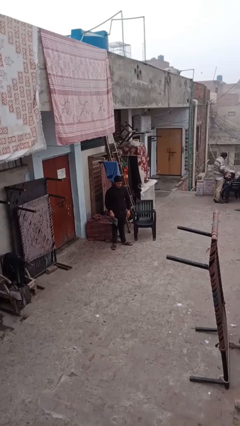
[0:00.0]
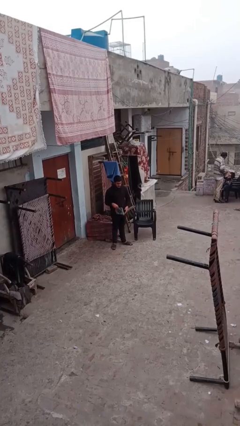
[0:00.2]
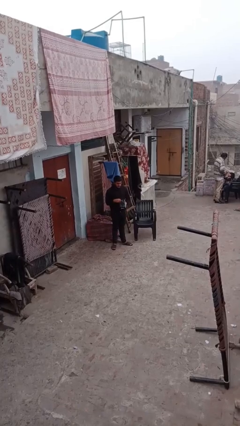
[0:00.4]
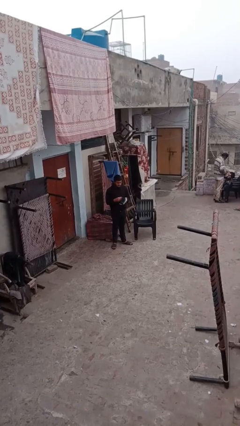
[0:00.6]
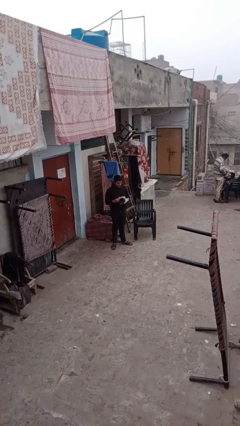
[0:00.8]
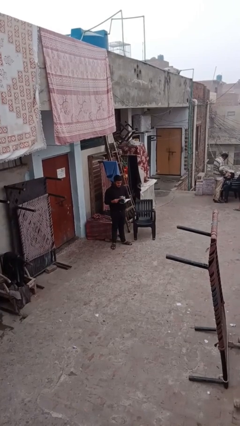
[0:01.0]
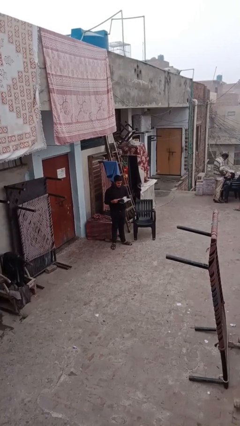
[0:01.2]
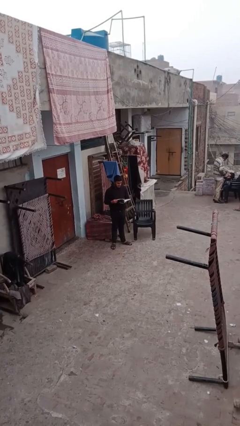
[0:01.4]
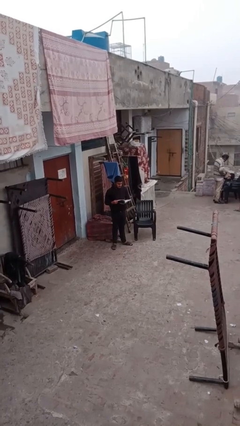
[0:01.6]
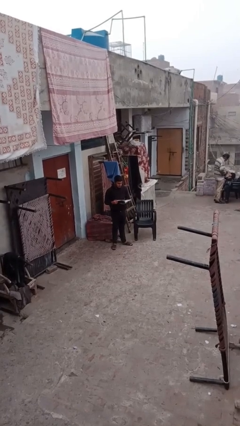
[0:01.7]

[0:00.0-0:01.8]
person reads document

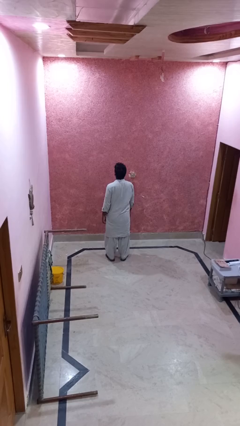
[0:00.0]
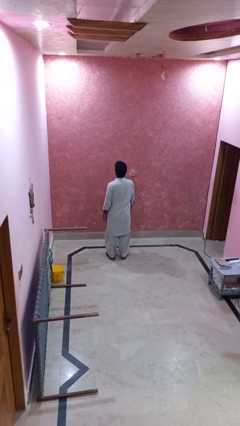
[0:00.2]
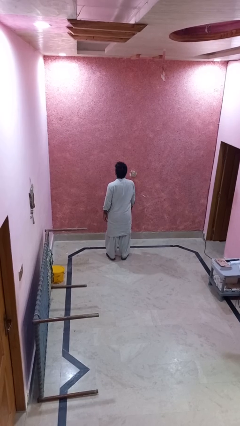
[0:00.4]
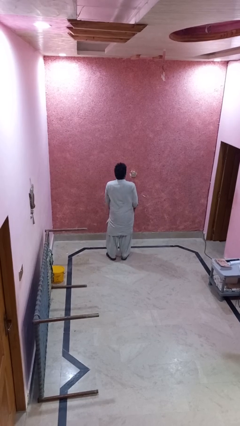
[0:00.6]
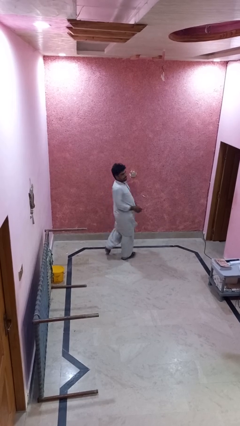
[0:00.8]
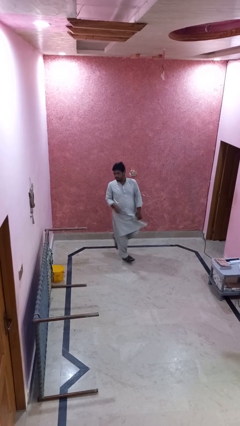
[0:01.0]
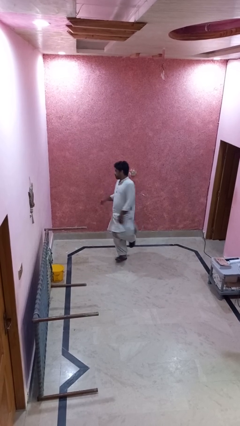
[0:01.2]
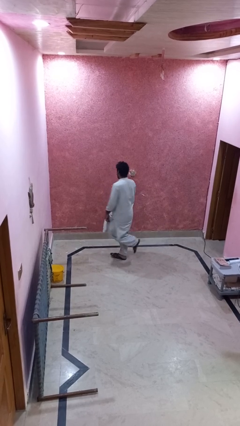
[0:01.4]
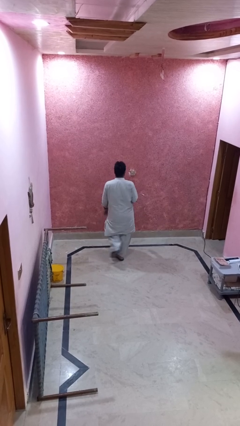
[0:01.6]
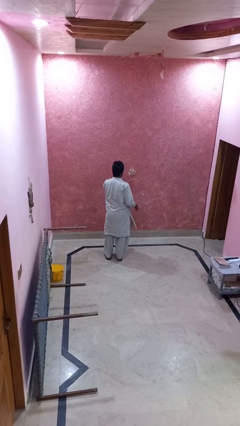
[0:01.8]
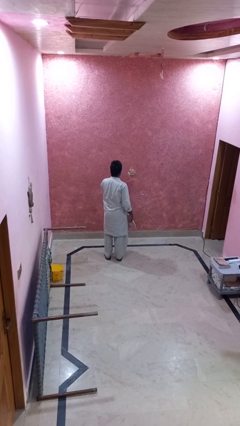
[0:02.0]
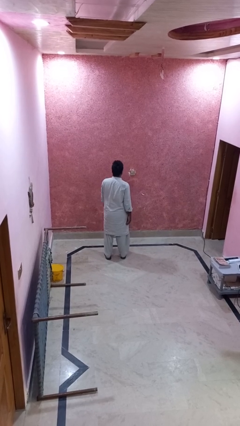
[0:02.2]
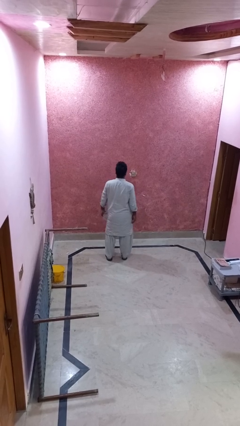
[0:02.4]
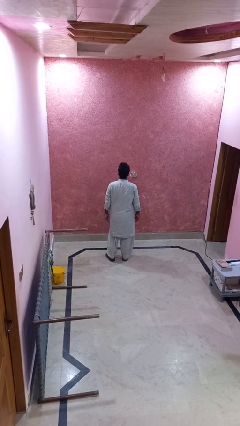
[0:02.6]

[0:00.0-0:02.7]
person twirls

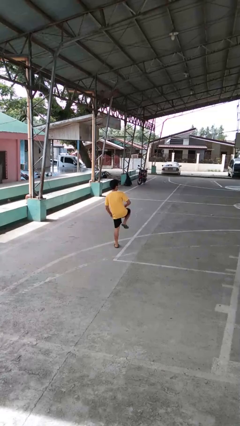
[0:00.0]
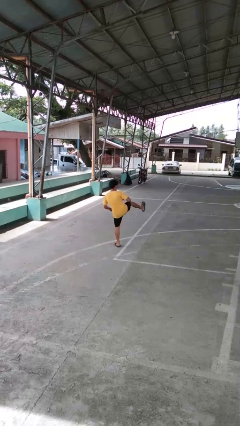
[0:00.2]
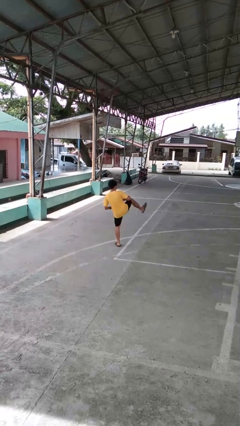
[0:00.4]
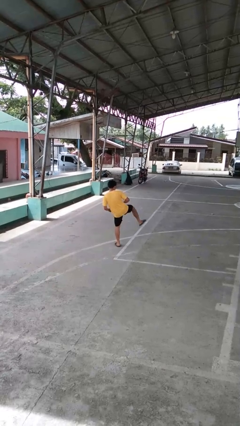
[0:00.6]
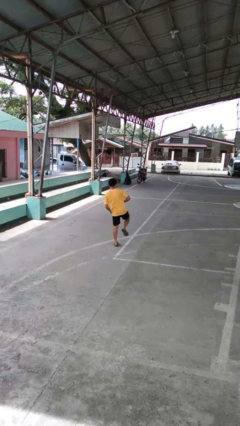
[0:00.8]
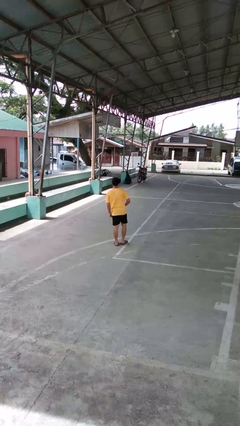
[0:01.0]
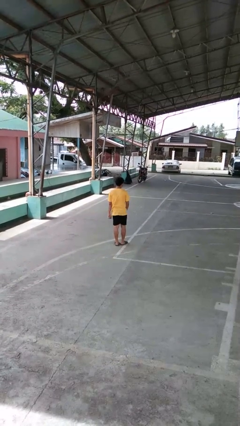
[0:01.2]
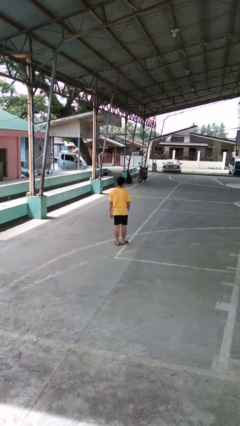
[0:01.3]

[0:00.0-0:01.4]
person karate kicks

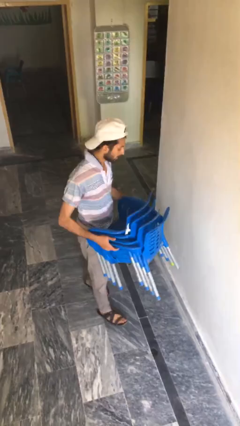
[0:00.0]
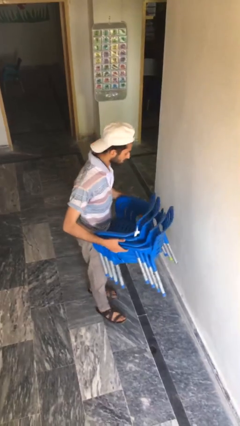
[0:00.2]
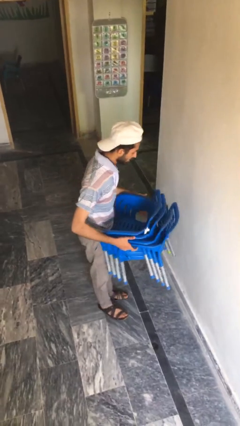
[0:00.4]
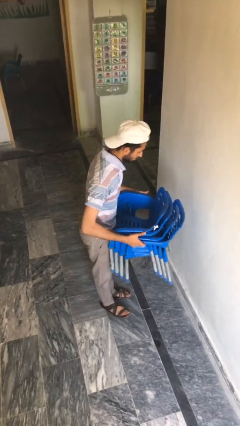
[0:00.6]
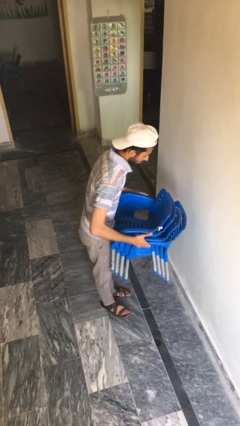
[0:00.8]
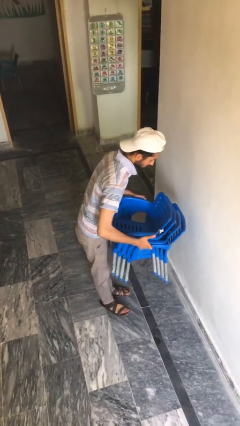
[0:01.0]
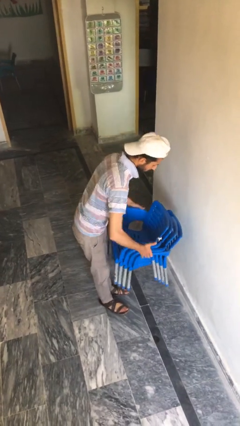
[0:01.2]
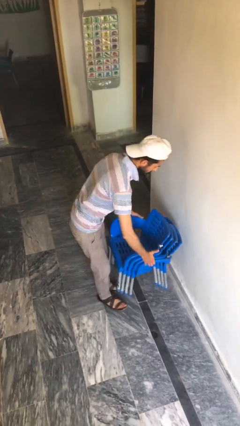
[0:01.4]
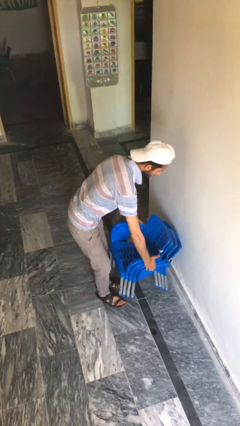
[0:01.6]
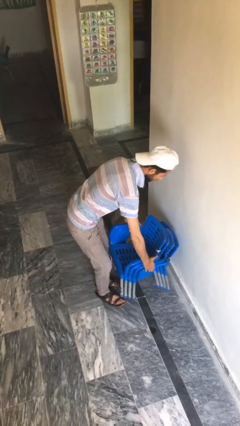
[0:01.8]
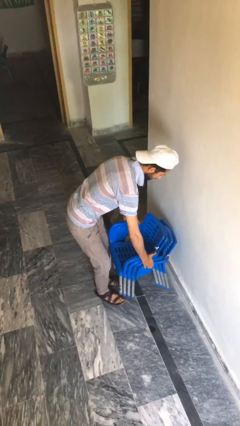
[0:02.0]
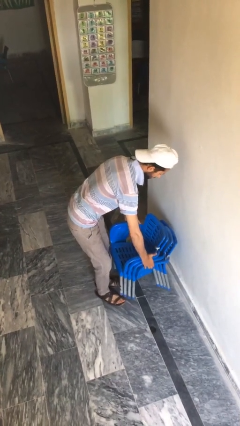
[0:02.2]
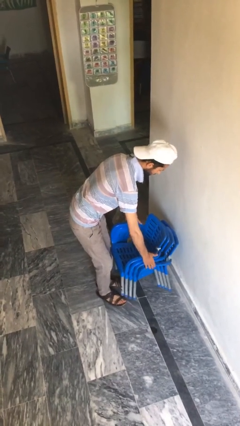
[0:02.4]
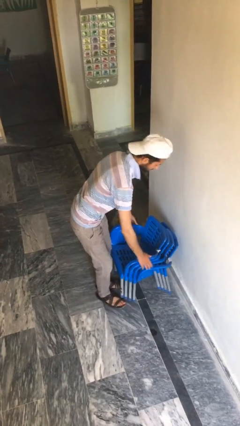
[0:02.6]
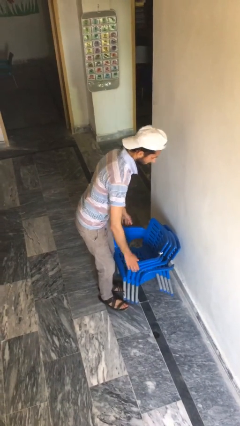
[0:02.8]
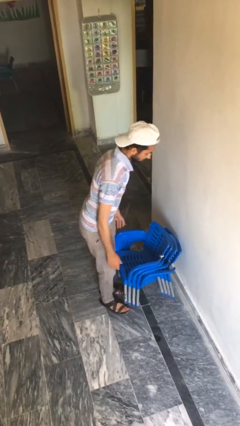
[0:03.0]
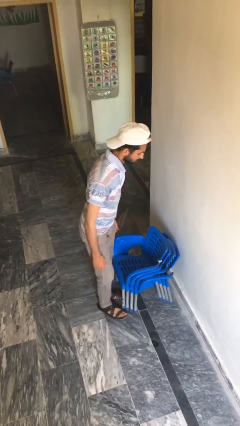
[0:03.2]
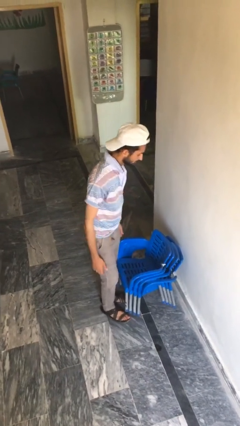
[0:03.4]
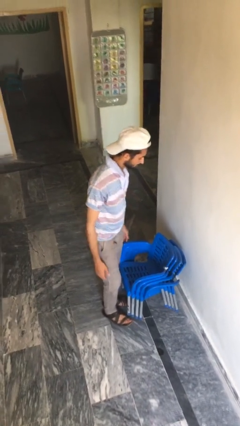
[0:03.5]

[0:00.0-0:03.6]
person puts down object on floor

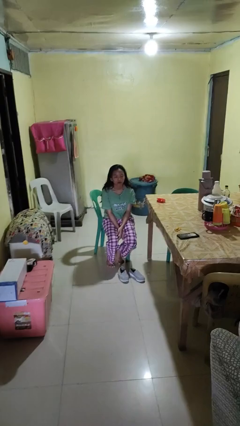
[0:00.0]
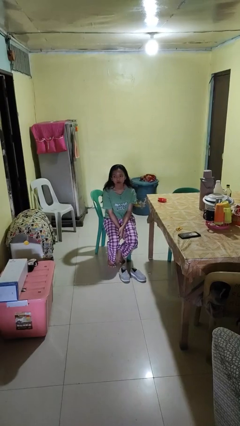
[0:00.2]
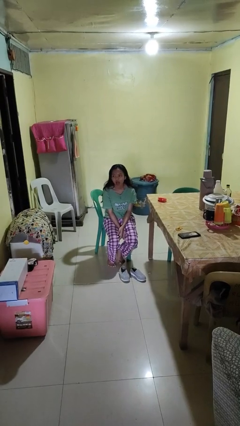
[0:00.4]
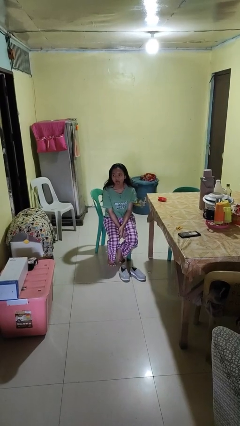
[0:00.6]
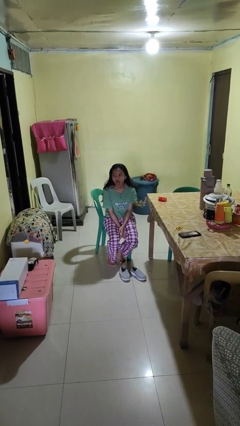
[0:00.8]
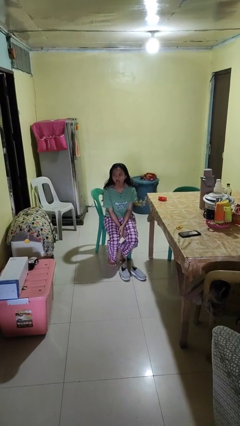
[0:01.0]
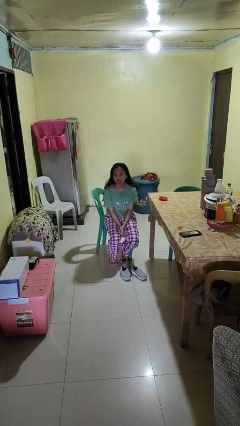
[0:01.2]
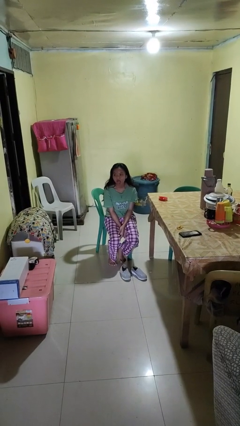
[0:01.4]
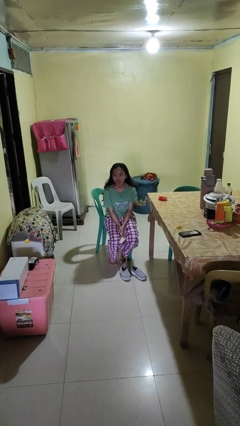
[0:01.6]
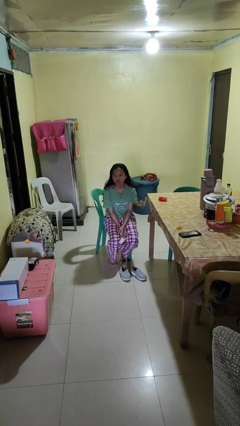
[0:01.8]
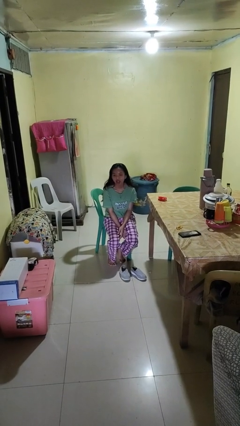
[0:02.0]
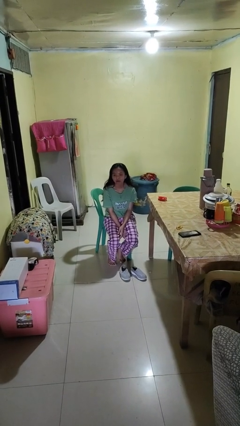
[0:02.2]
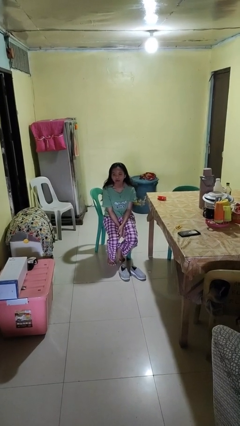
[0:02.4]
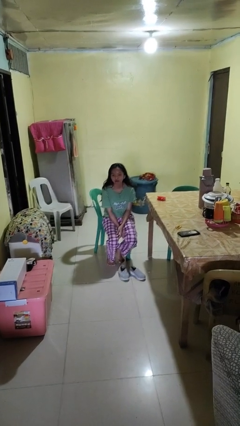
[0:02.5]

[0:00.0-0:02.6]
person sticks out tongue

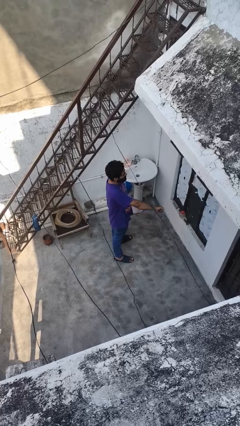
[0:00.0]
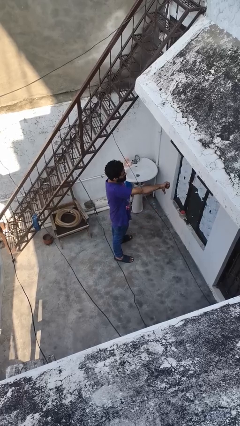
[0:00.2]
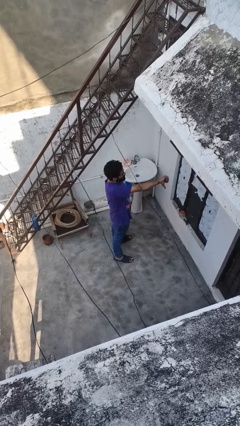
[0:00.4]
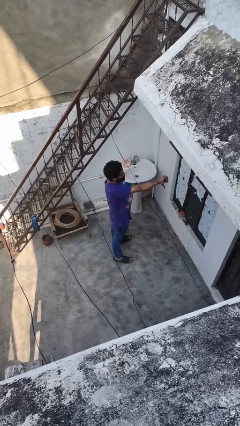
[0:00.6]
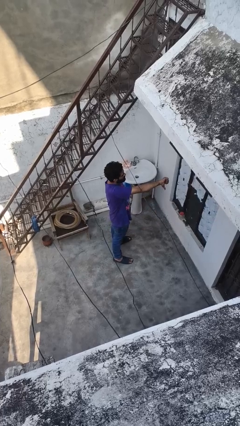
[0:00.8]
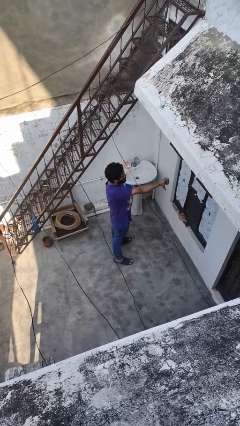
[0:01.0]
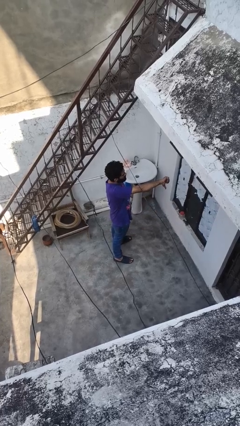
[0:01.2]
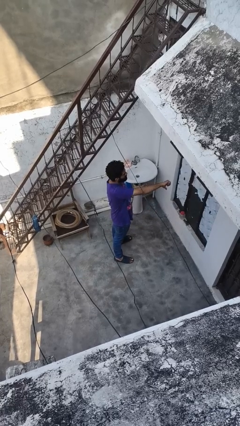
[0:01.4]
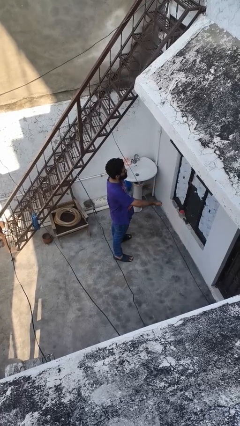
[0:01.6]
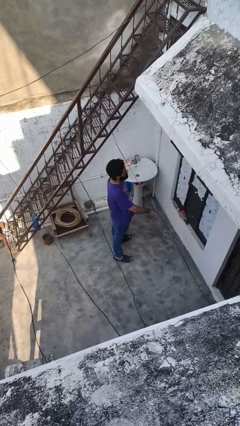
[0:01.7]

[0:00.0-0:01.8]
person gestures thumbs down

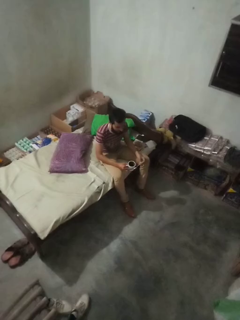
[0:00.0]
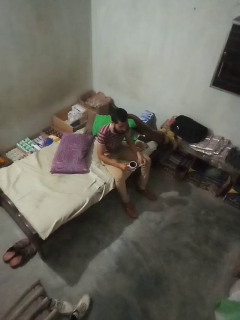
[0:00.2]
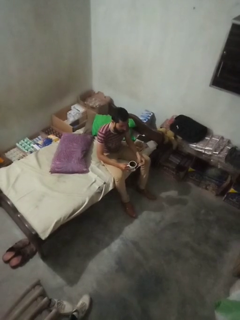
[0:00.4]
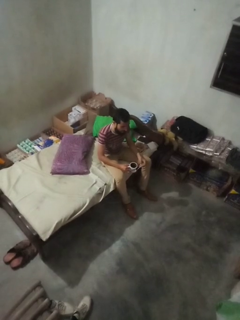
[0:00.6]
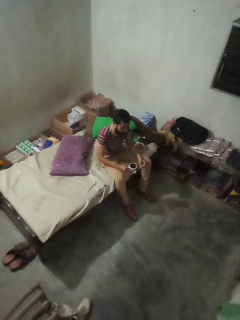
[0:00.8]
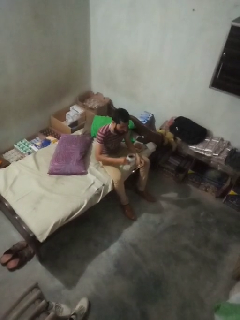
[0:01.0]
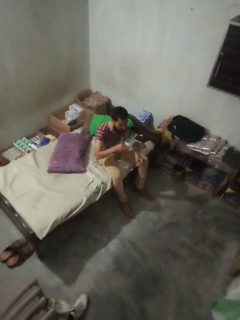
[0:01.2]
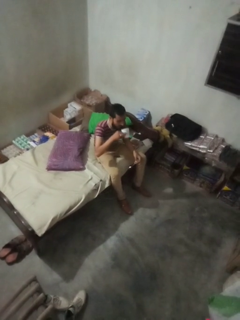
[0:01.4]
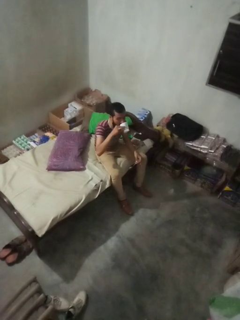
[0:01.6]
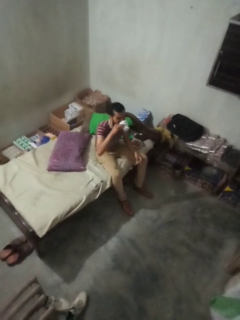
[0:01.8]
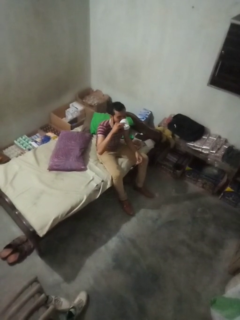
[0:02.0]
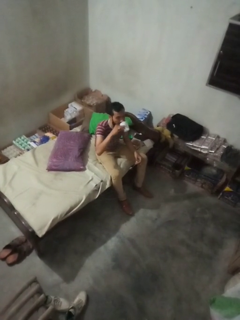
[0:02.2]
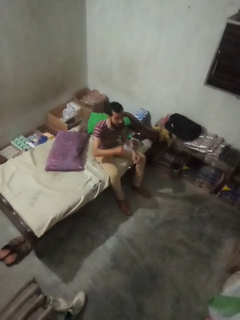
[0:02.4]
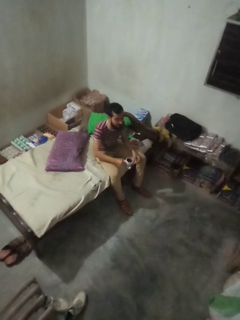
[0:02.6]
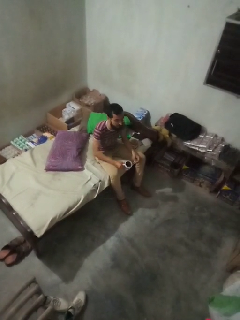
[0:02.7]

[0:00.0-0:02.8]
person drinks from mug

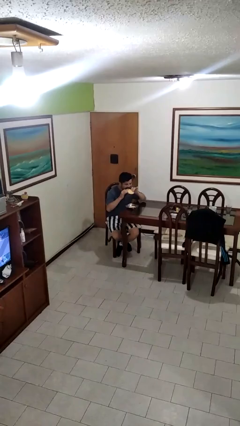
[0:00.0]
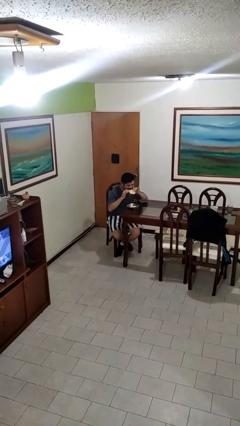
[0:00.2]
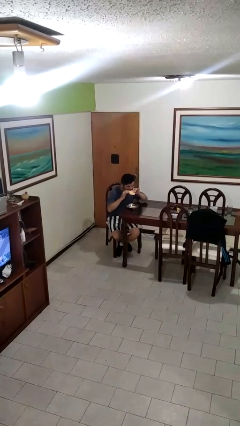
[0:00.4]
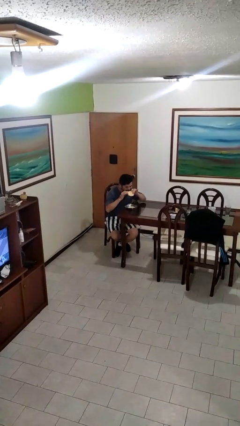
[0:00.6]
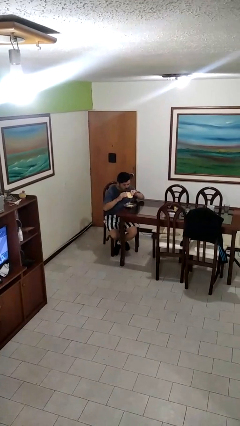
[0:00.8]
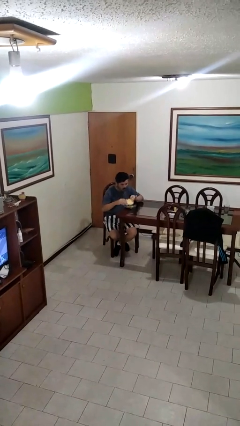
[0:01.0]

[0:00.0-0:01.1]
person eats with hands
